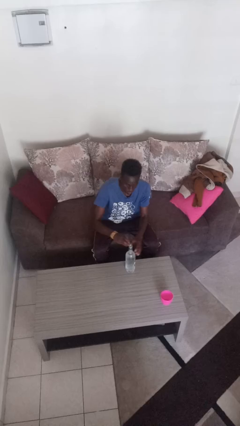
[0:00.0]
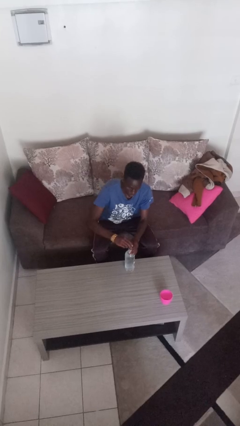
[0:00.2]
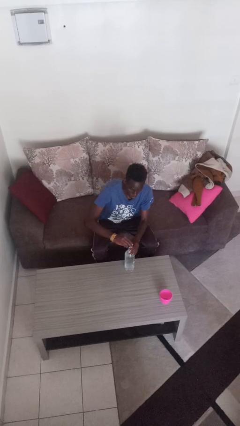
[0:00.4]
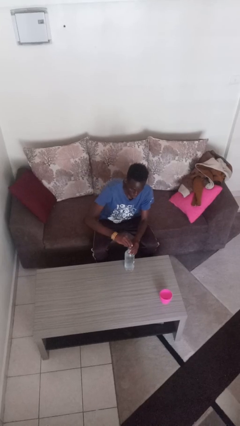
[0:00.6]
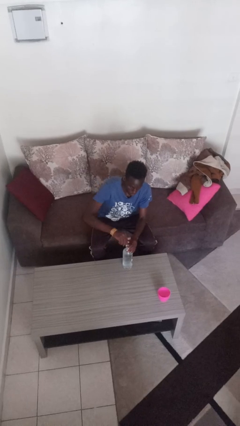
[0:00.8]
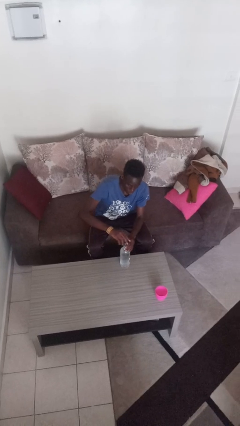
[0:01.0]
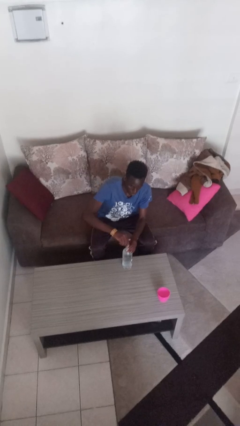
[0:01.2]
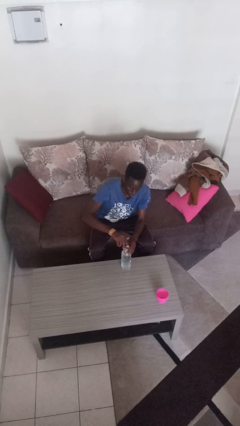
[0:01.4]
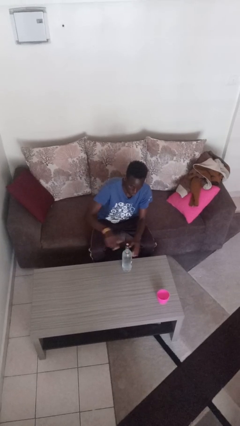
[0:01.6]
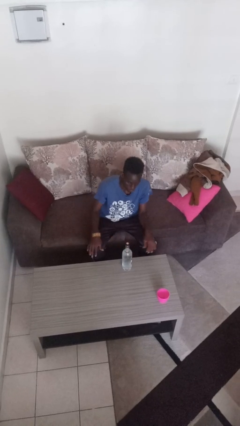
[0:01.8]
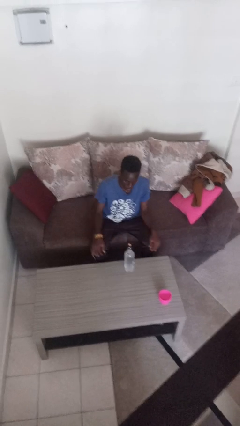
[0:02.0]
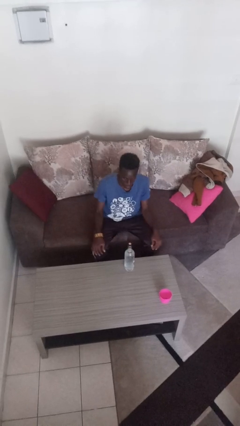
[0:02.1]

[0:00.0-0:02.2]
person screws lid to bottle

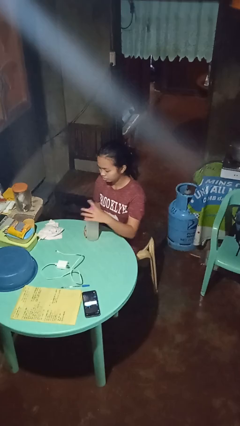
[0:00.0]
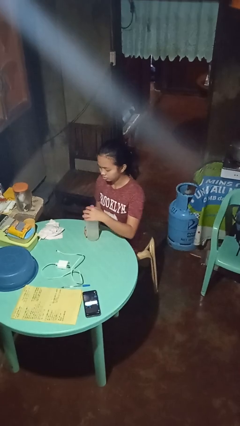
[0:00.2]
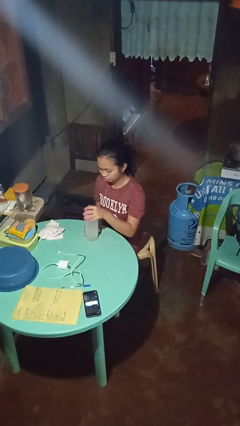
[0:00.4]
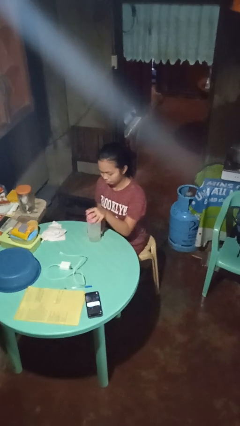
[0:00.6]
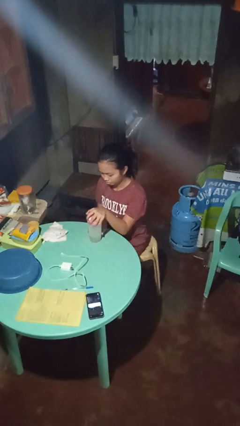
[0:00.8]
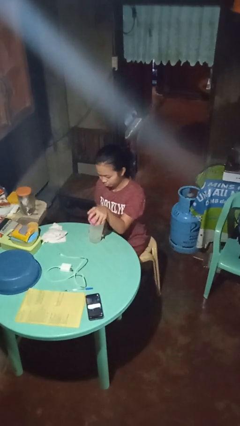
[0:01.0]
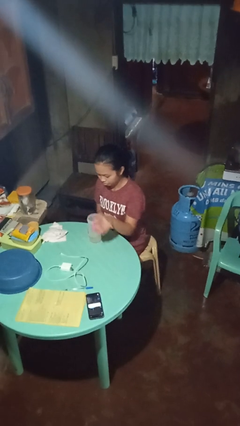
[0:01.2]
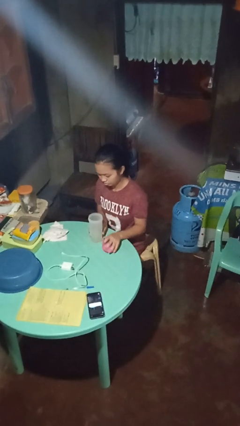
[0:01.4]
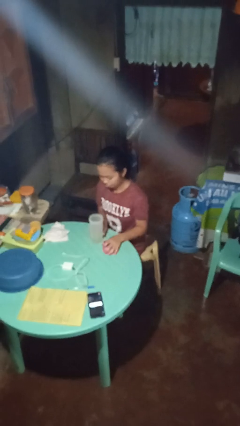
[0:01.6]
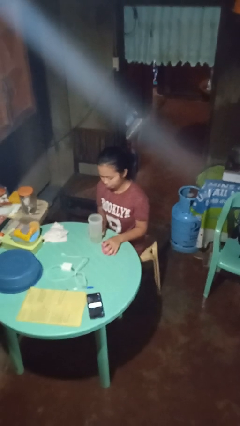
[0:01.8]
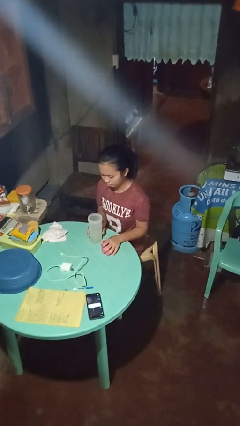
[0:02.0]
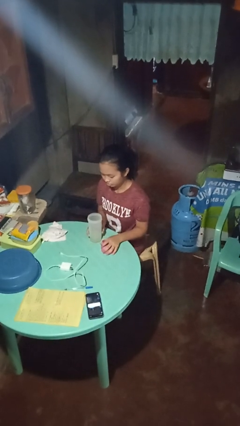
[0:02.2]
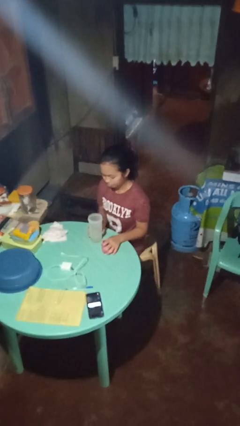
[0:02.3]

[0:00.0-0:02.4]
person unscrews lid from bottle

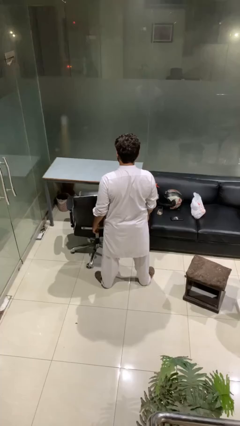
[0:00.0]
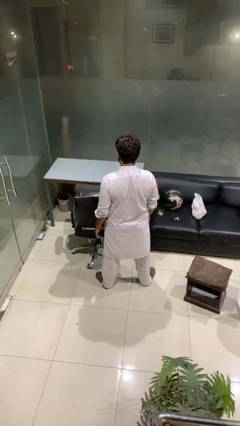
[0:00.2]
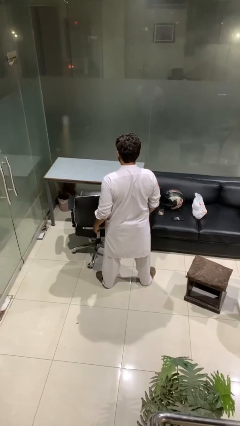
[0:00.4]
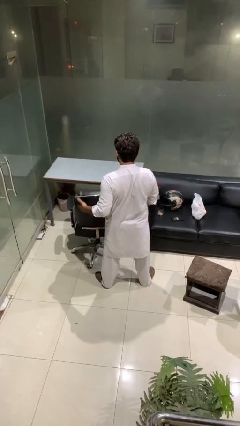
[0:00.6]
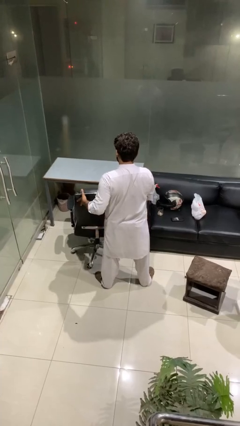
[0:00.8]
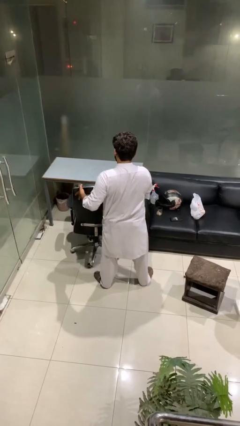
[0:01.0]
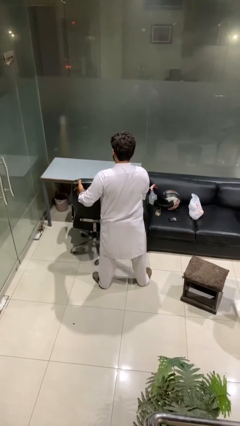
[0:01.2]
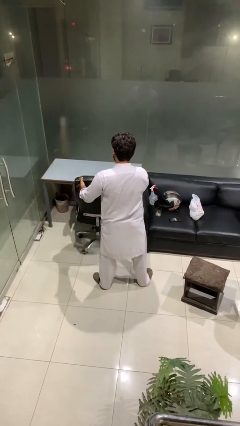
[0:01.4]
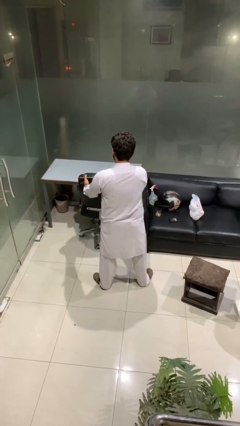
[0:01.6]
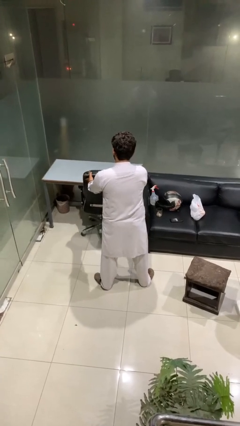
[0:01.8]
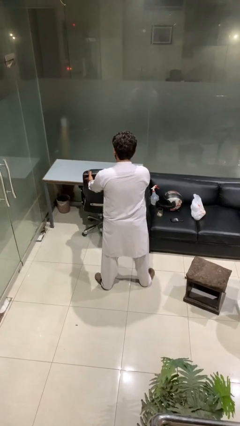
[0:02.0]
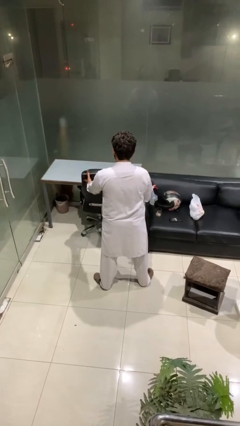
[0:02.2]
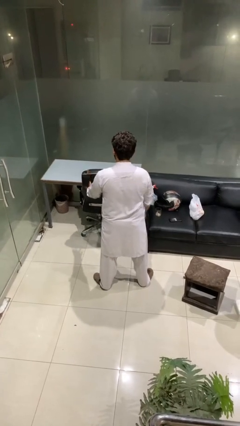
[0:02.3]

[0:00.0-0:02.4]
person pushes in chair

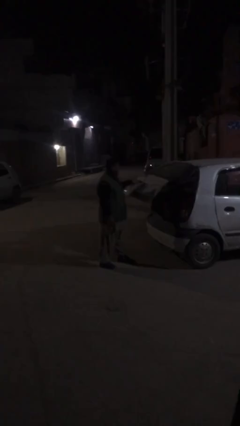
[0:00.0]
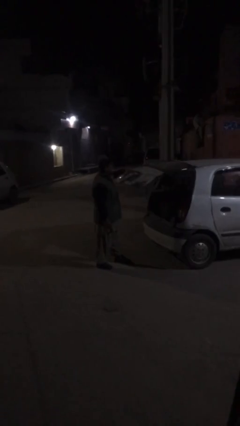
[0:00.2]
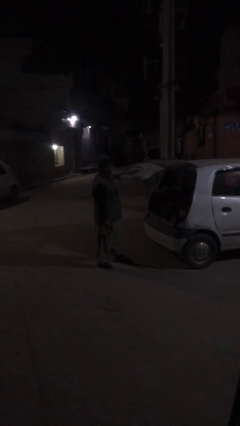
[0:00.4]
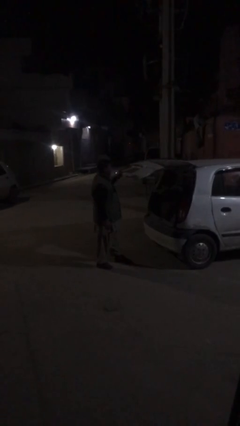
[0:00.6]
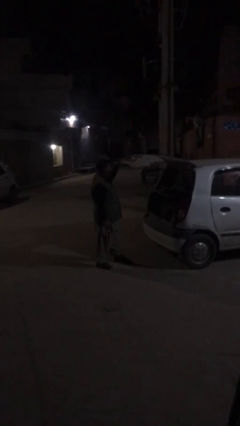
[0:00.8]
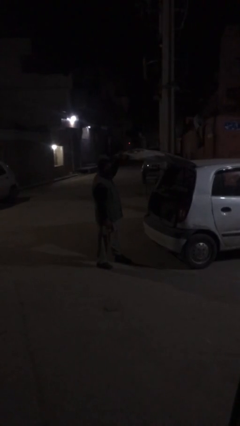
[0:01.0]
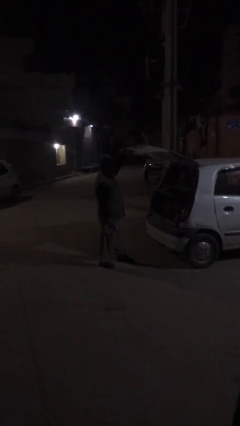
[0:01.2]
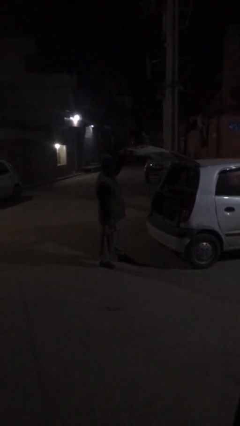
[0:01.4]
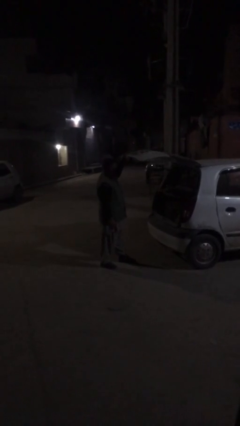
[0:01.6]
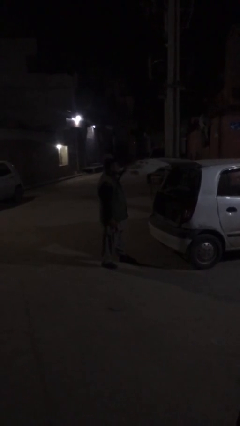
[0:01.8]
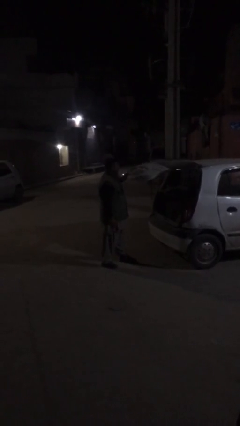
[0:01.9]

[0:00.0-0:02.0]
person opens car trunk

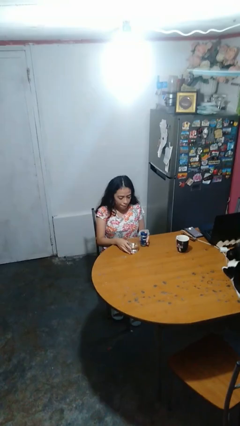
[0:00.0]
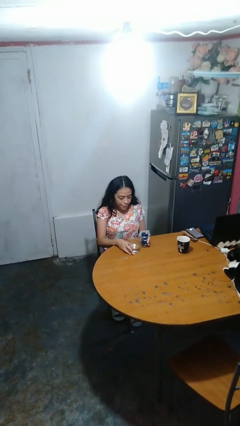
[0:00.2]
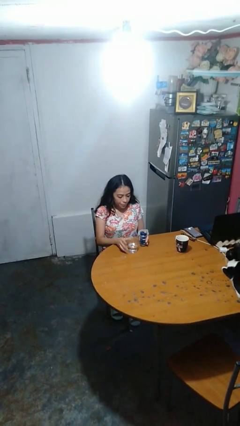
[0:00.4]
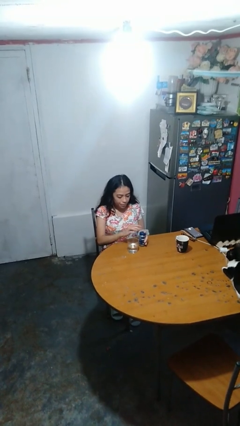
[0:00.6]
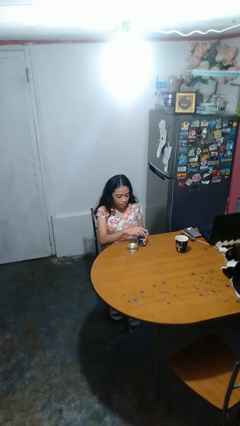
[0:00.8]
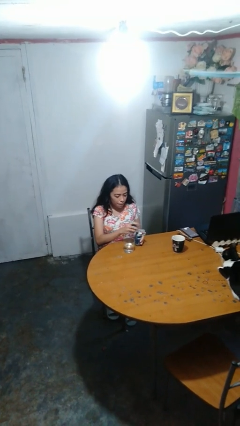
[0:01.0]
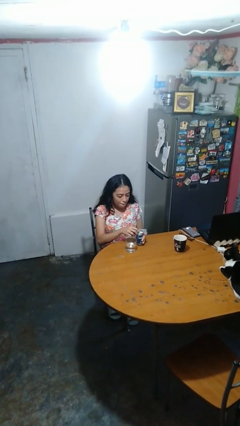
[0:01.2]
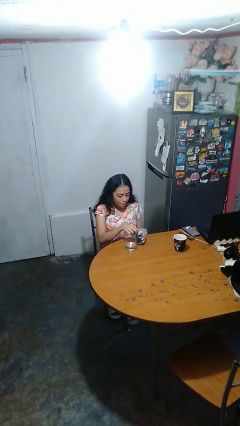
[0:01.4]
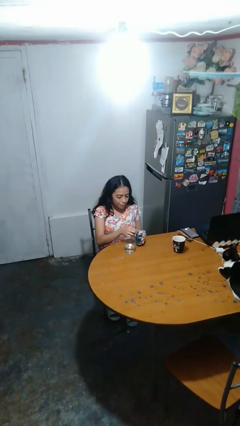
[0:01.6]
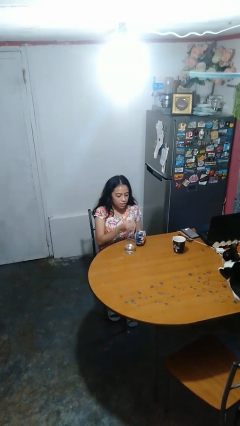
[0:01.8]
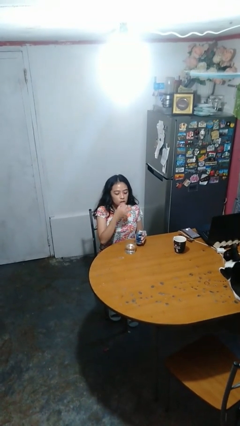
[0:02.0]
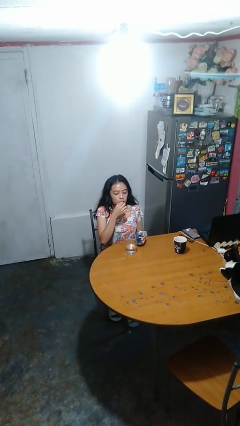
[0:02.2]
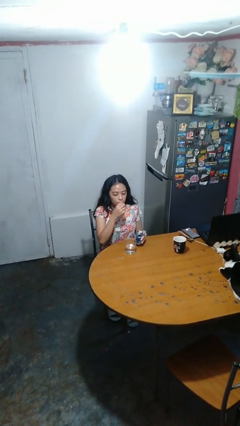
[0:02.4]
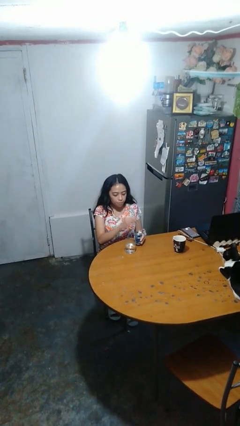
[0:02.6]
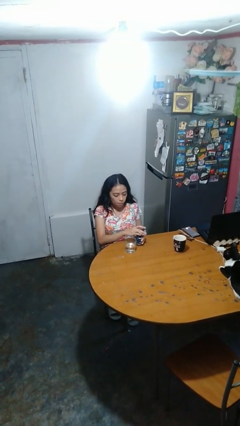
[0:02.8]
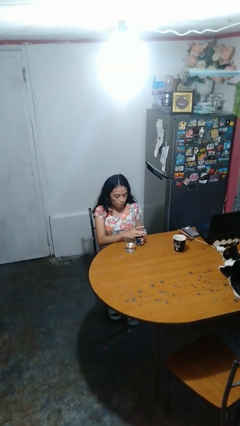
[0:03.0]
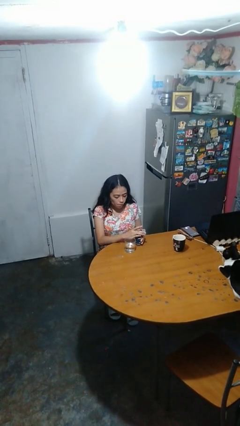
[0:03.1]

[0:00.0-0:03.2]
person takes medicine pills

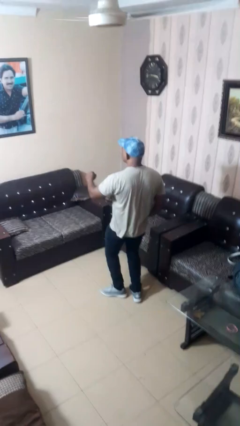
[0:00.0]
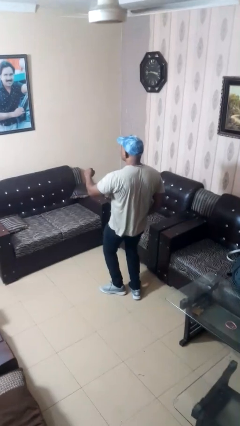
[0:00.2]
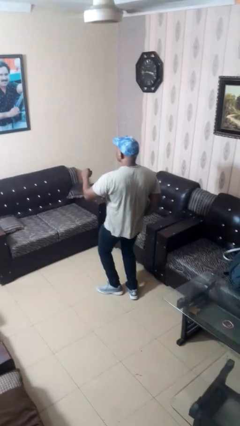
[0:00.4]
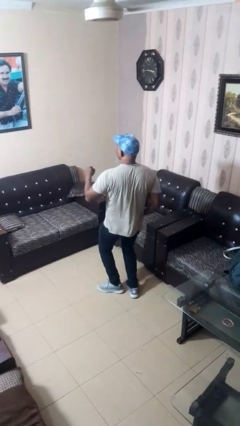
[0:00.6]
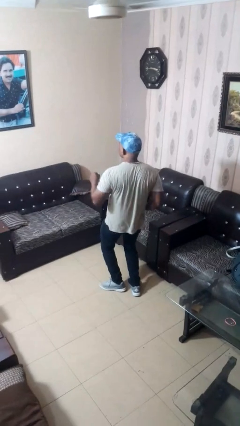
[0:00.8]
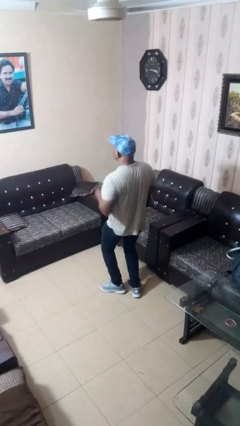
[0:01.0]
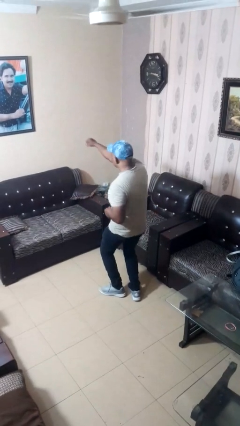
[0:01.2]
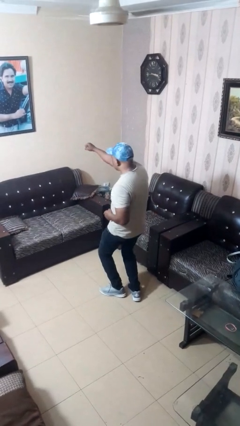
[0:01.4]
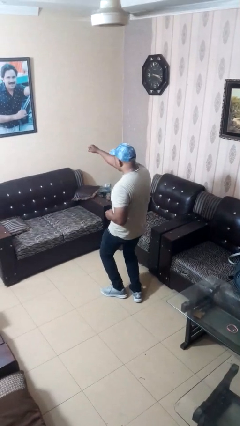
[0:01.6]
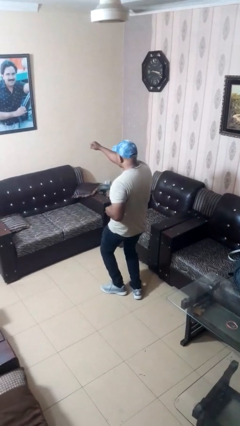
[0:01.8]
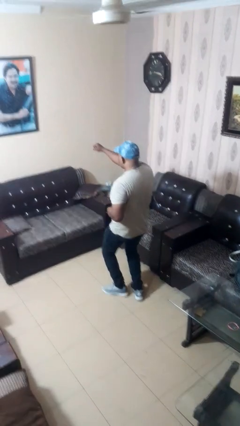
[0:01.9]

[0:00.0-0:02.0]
person karate chop

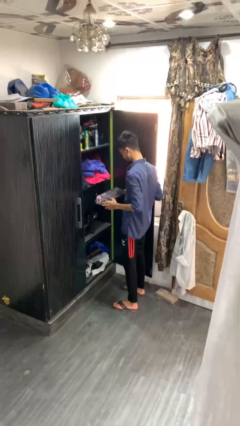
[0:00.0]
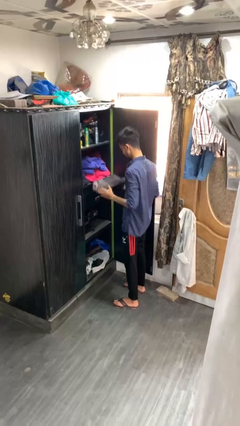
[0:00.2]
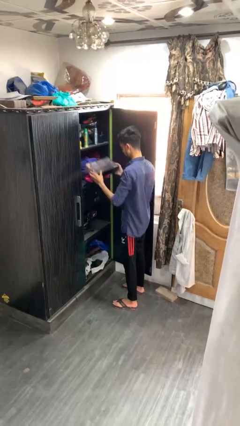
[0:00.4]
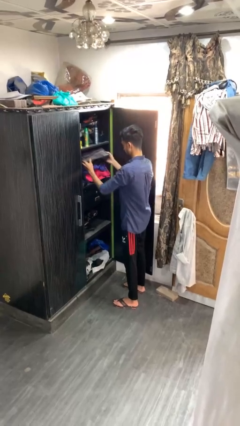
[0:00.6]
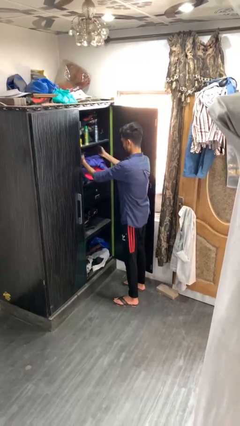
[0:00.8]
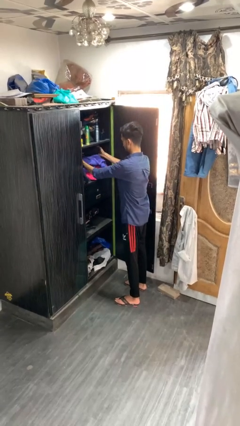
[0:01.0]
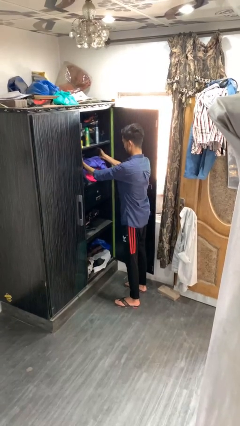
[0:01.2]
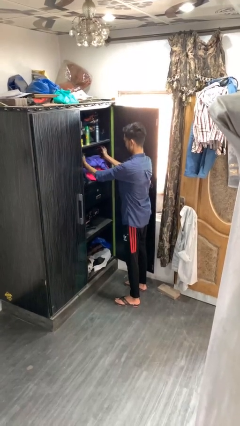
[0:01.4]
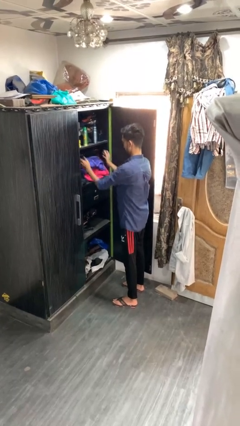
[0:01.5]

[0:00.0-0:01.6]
person puts down object into cabinet

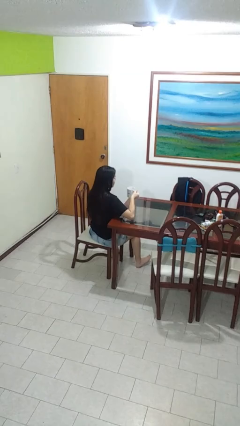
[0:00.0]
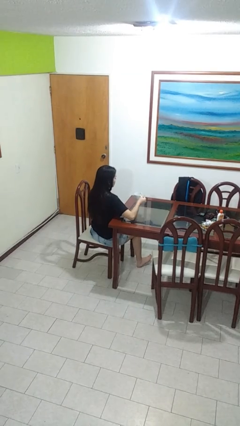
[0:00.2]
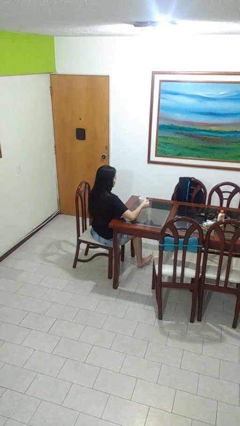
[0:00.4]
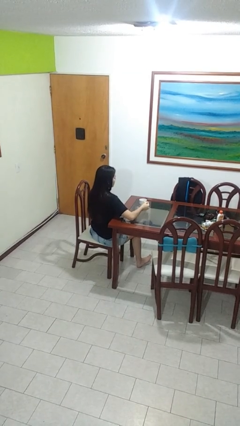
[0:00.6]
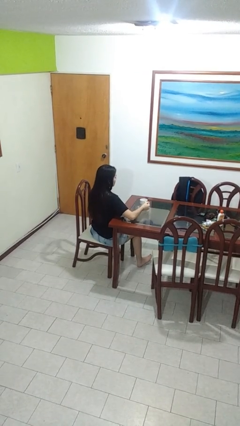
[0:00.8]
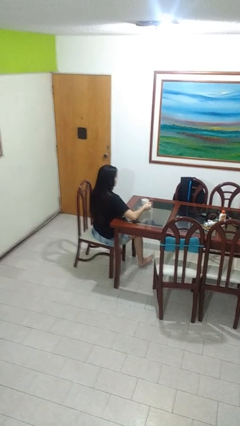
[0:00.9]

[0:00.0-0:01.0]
person puts down object on table

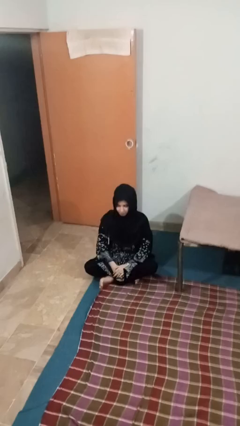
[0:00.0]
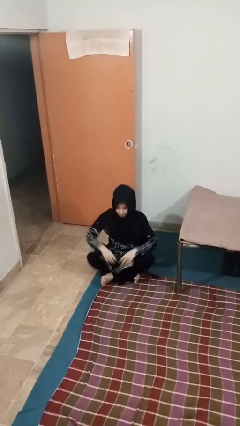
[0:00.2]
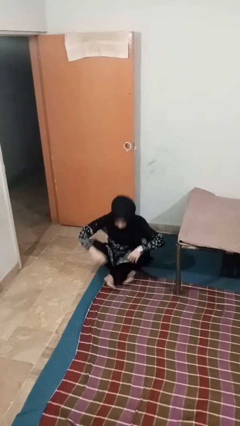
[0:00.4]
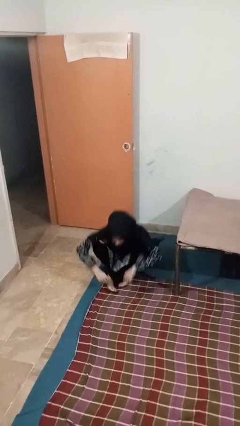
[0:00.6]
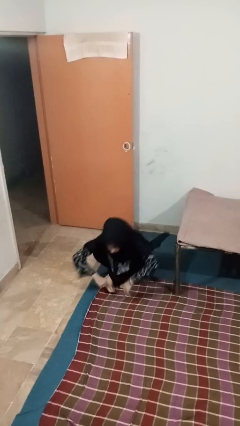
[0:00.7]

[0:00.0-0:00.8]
person sits crisscross
